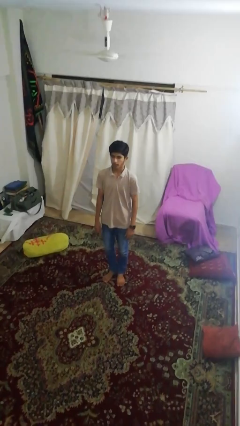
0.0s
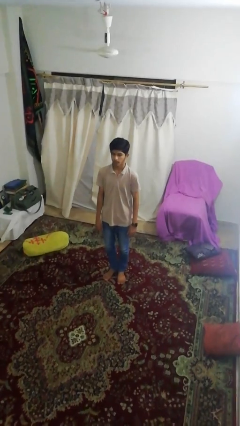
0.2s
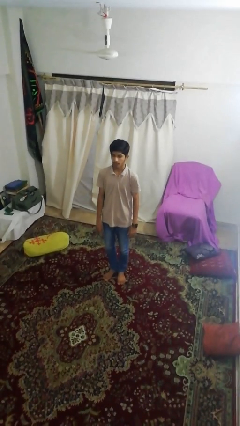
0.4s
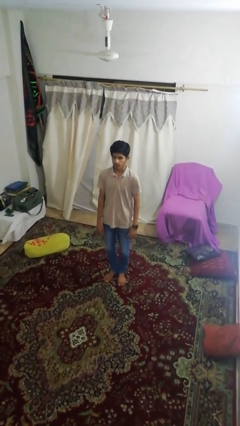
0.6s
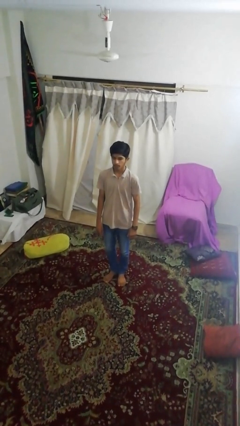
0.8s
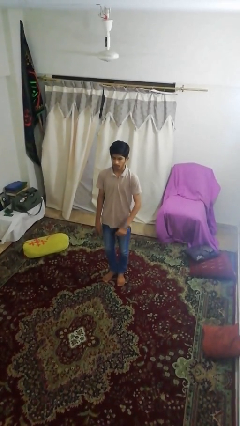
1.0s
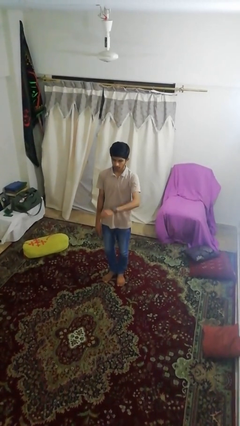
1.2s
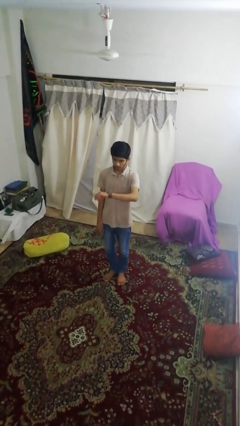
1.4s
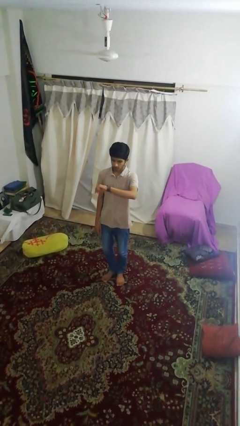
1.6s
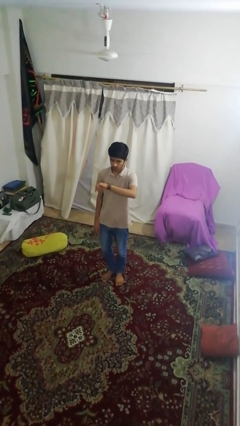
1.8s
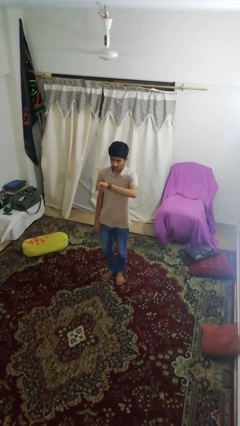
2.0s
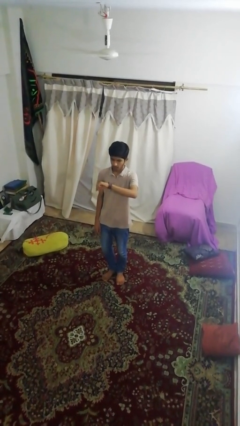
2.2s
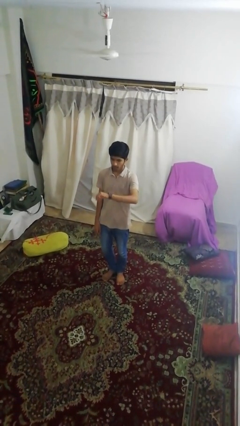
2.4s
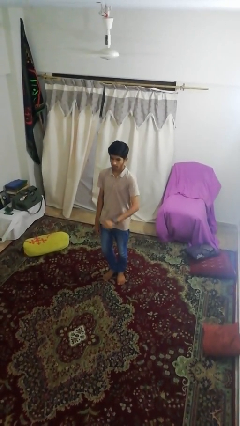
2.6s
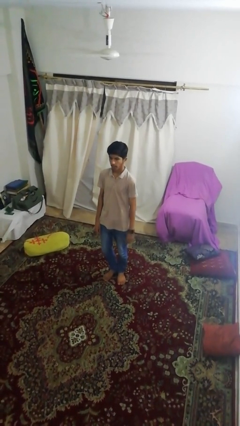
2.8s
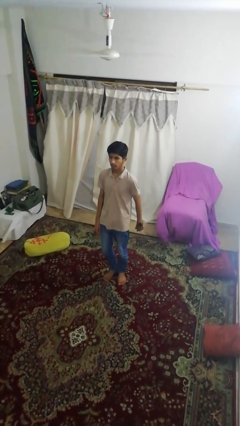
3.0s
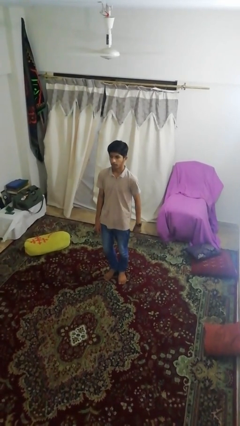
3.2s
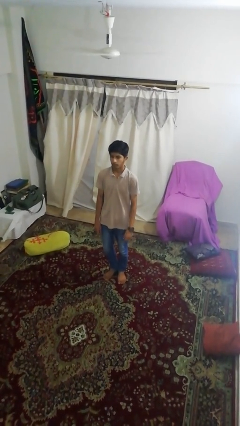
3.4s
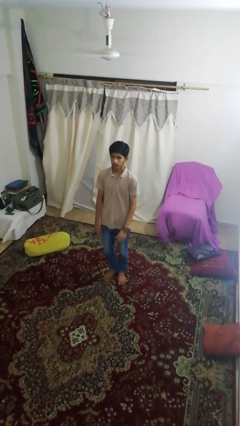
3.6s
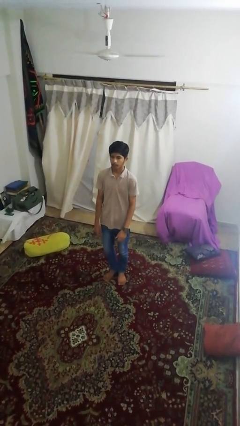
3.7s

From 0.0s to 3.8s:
person looks at wristwatch

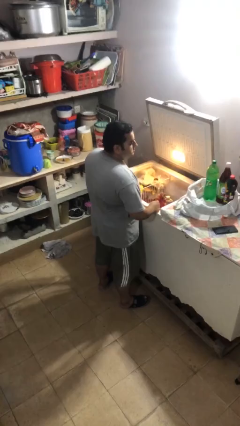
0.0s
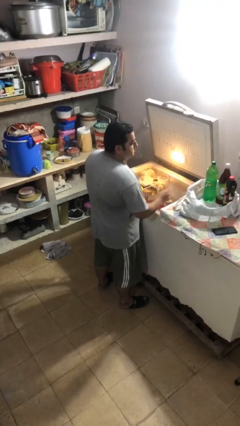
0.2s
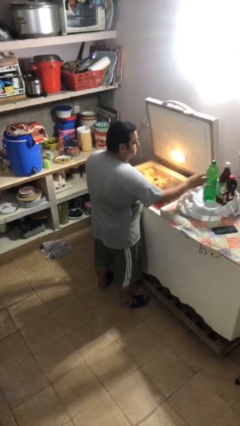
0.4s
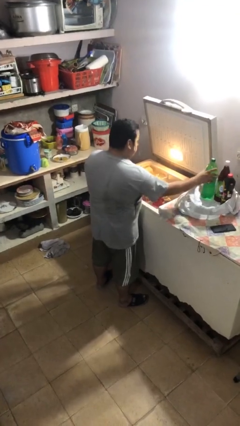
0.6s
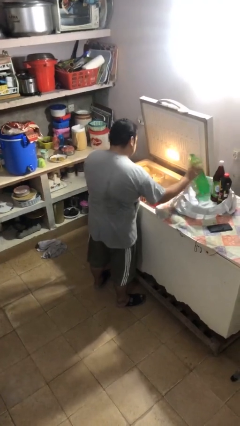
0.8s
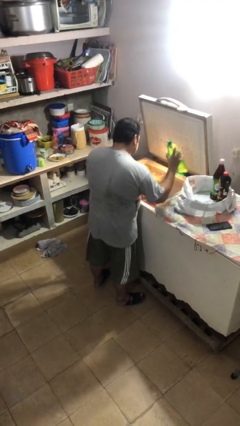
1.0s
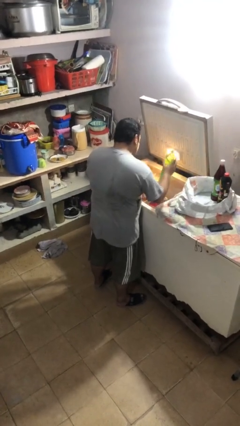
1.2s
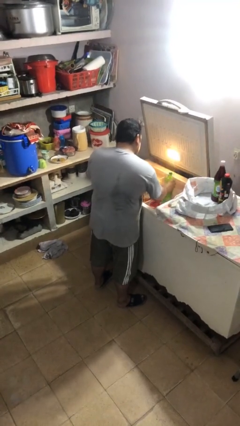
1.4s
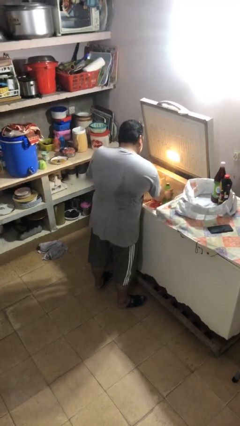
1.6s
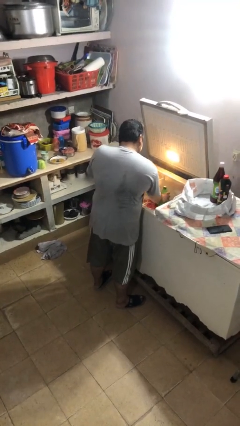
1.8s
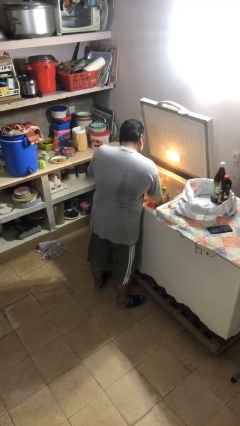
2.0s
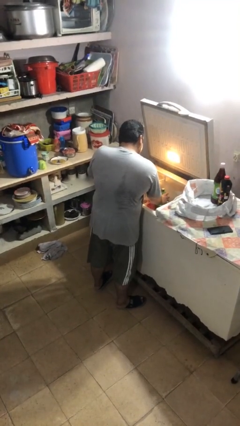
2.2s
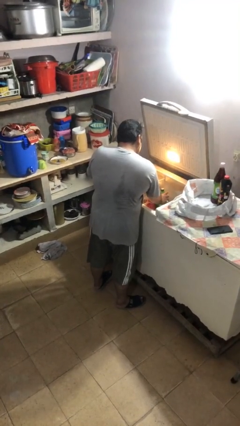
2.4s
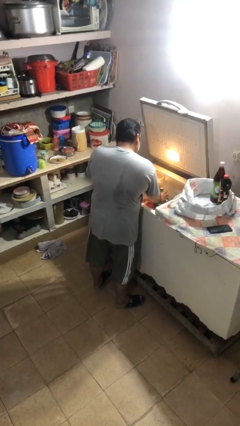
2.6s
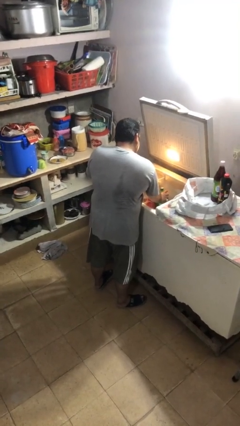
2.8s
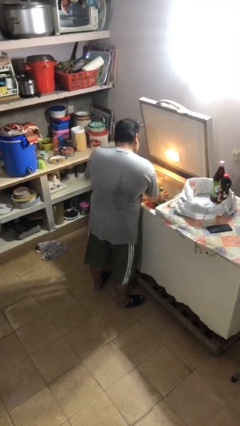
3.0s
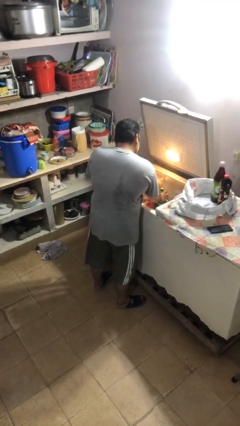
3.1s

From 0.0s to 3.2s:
person loads groceries into refrigerator

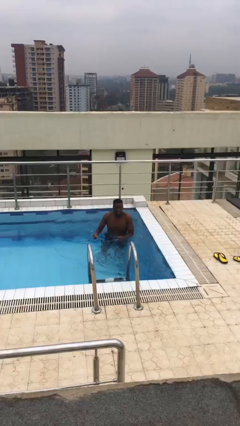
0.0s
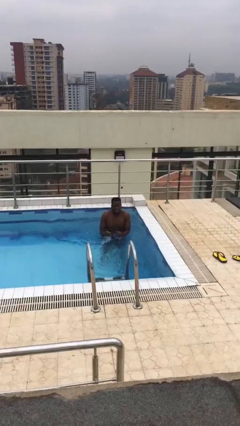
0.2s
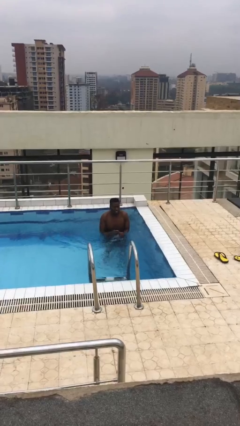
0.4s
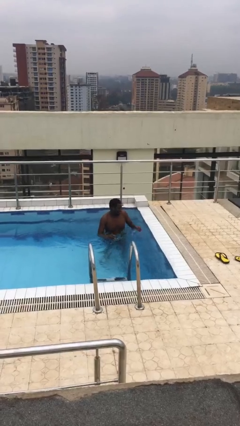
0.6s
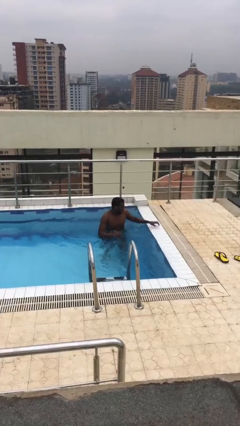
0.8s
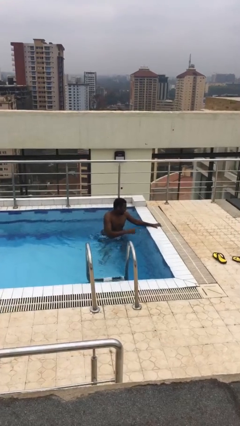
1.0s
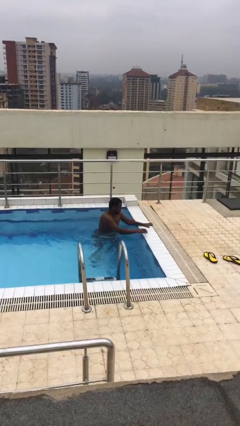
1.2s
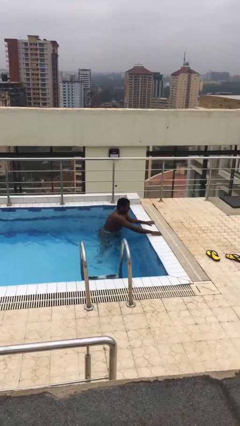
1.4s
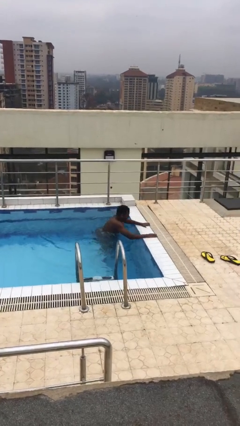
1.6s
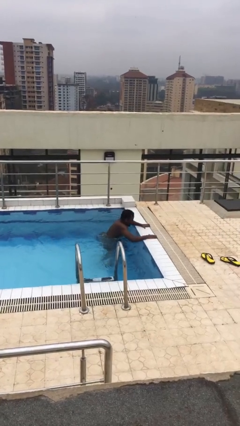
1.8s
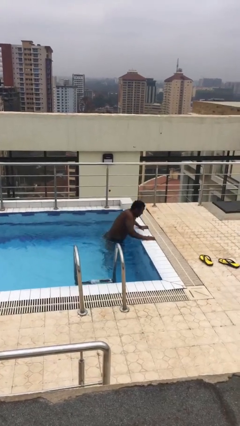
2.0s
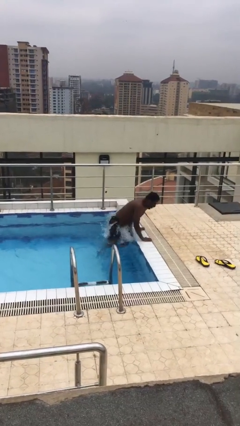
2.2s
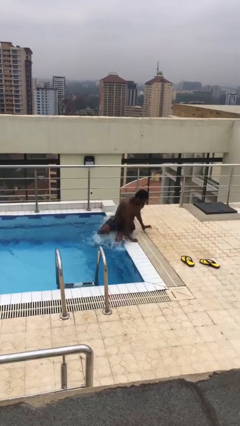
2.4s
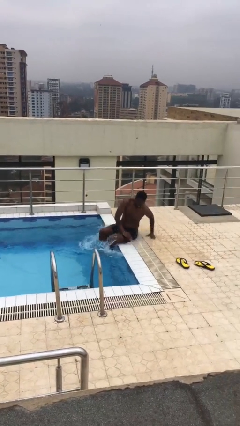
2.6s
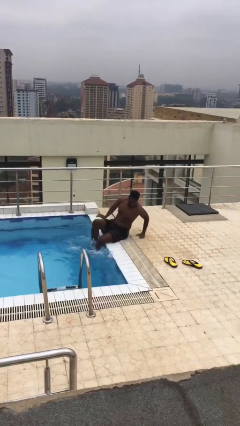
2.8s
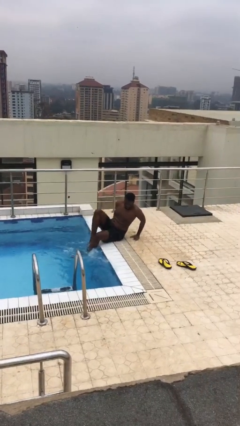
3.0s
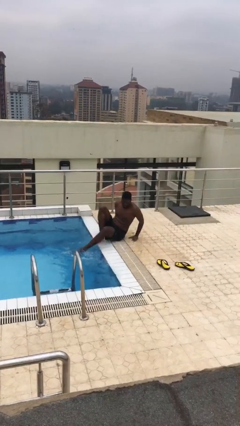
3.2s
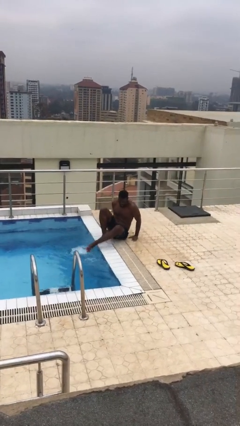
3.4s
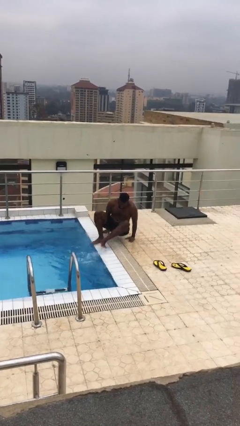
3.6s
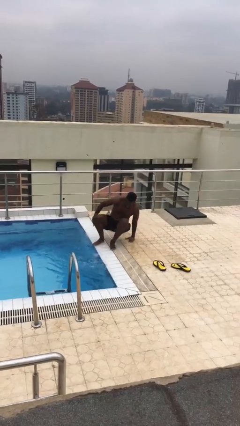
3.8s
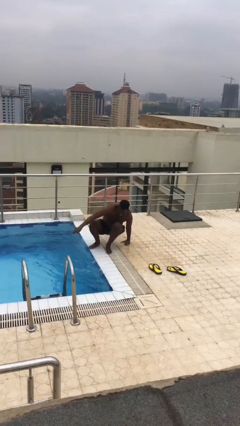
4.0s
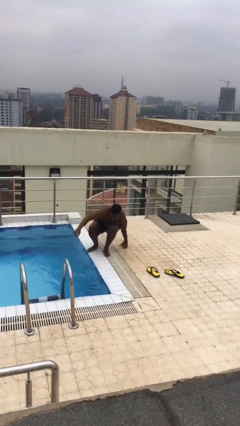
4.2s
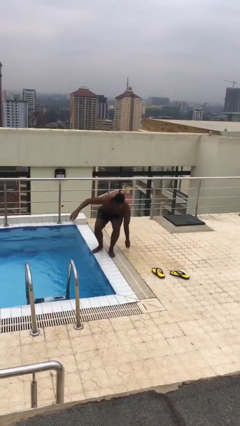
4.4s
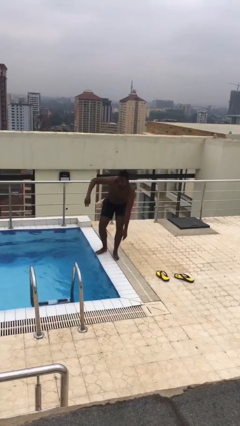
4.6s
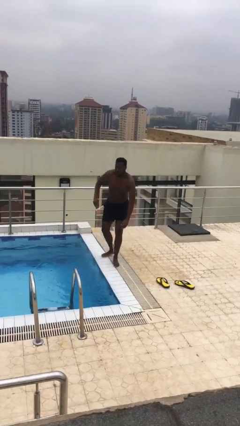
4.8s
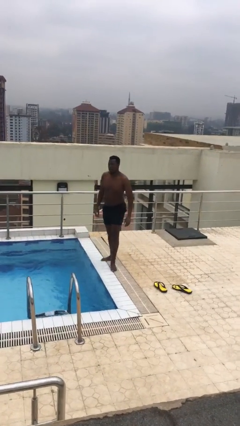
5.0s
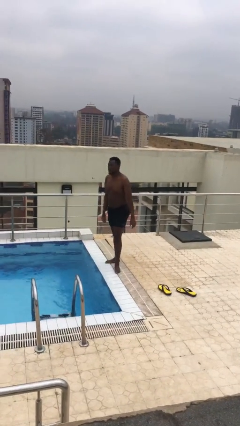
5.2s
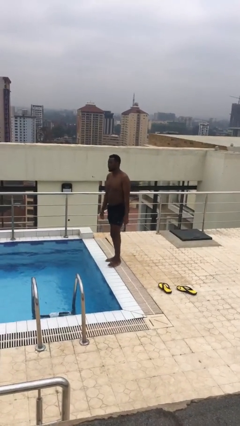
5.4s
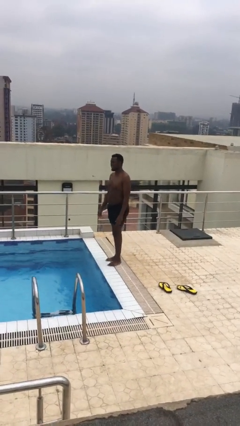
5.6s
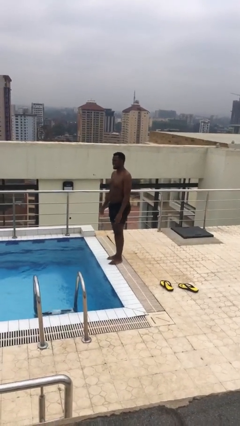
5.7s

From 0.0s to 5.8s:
person exits pool

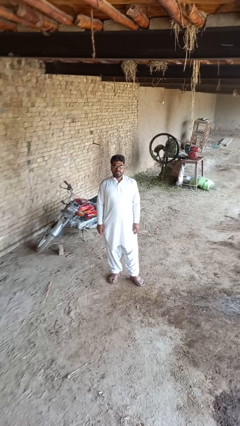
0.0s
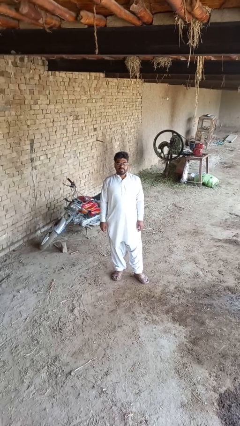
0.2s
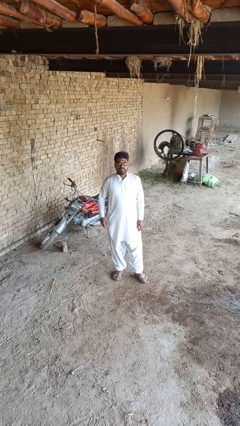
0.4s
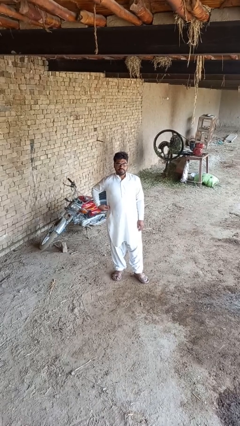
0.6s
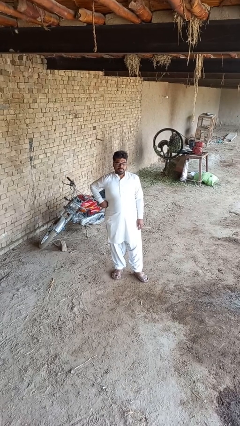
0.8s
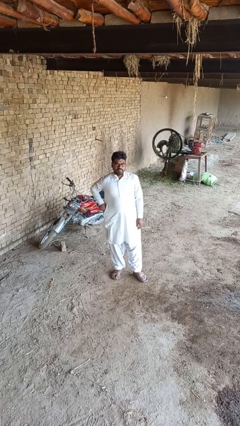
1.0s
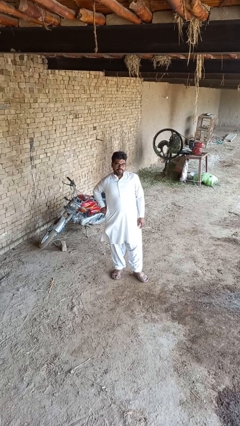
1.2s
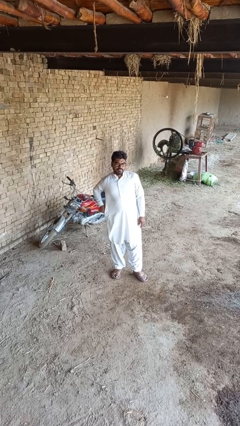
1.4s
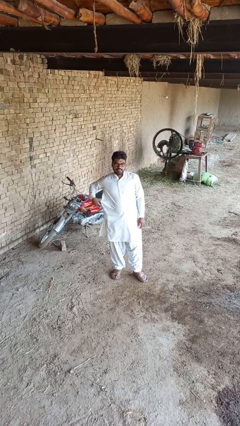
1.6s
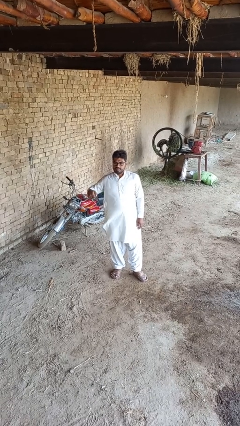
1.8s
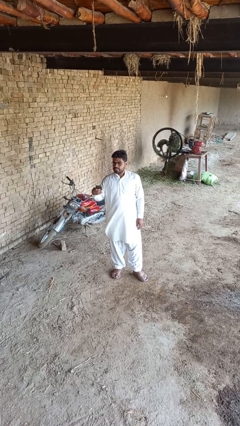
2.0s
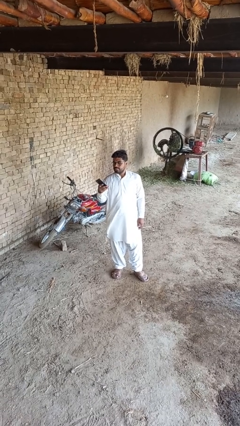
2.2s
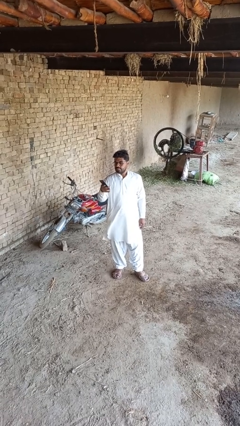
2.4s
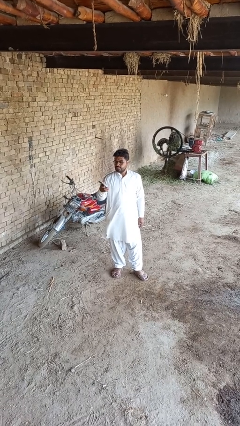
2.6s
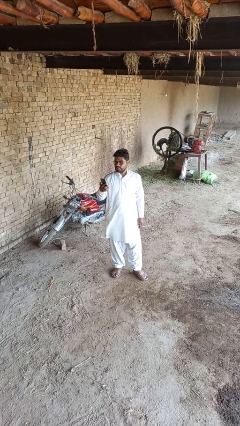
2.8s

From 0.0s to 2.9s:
person takes phone from pocket

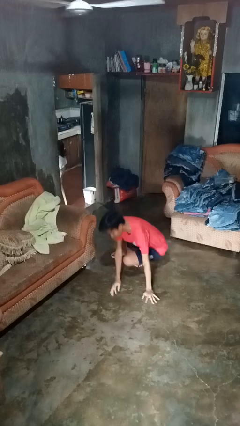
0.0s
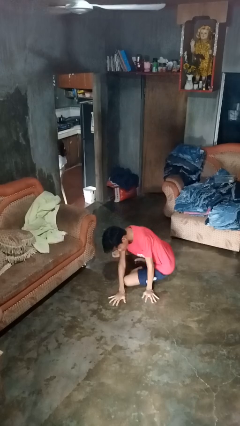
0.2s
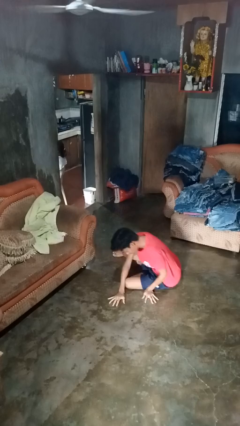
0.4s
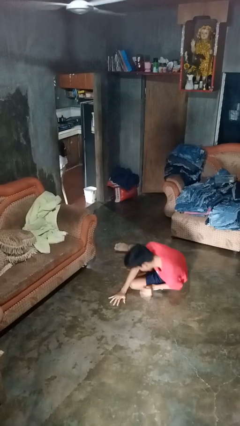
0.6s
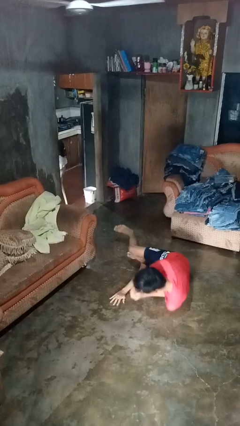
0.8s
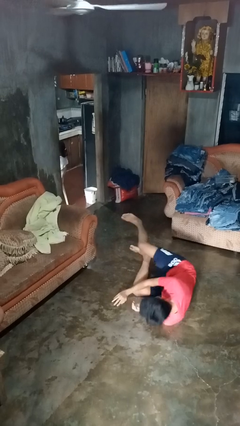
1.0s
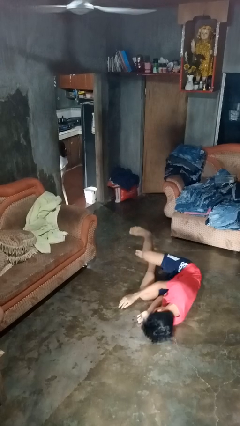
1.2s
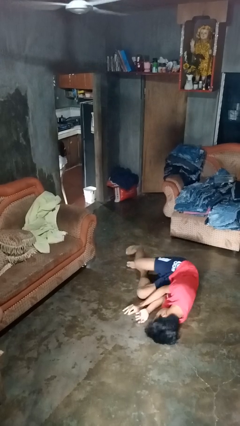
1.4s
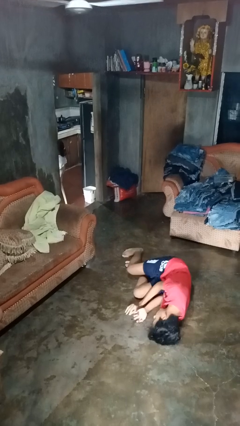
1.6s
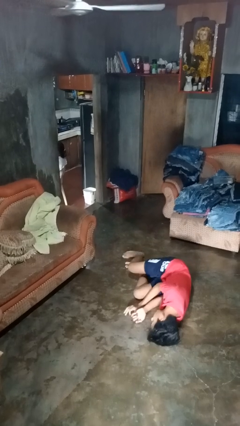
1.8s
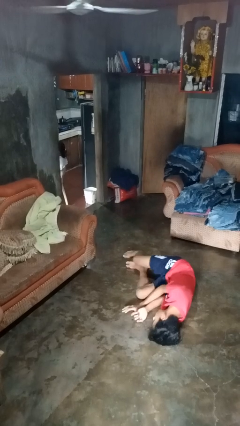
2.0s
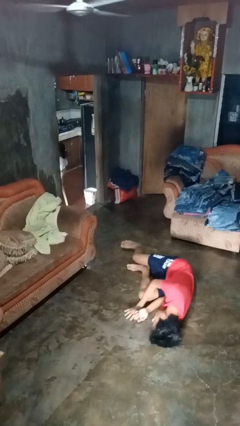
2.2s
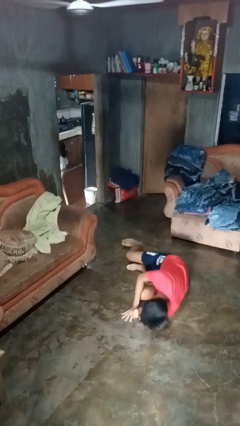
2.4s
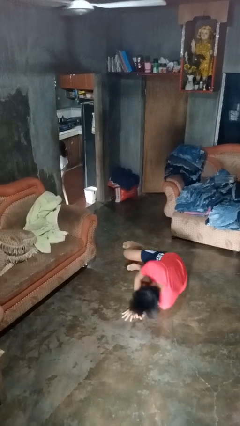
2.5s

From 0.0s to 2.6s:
person falls while standing
